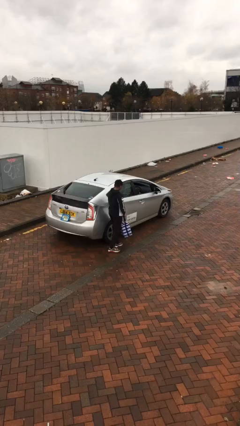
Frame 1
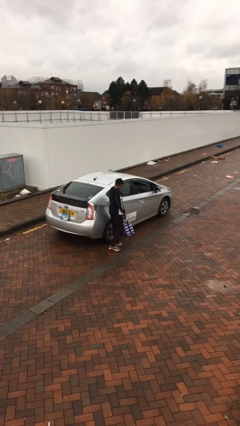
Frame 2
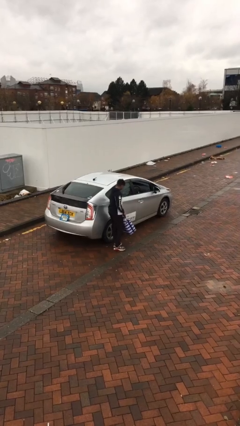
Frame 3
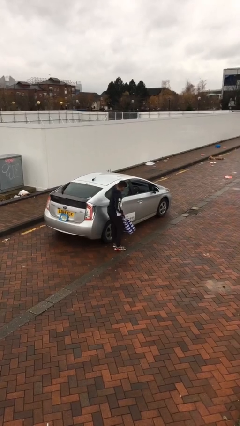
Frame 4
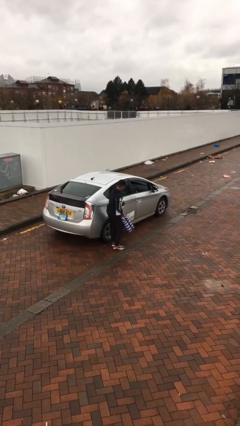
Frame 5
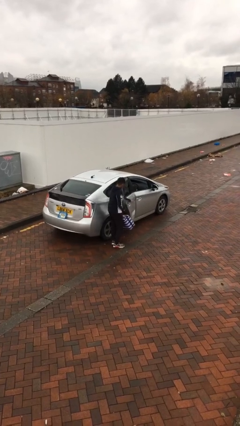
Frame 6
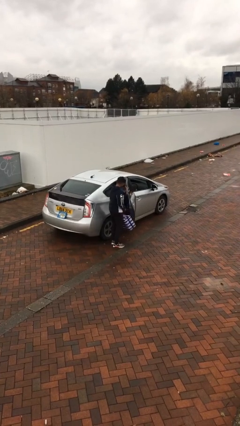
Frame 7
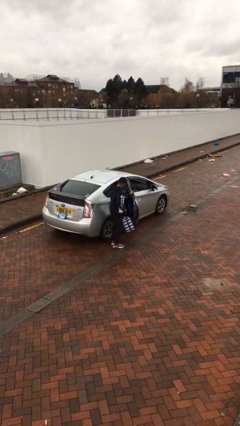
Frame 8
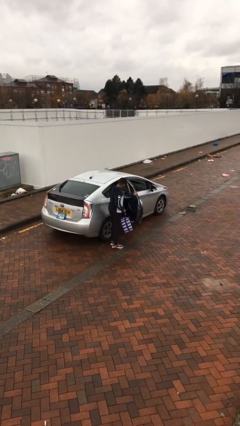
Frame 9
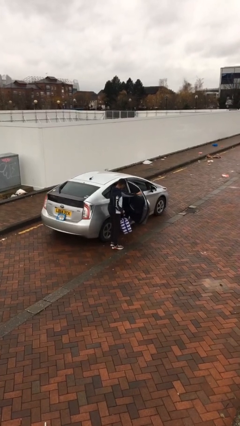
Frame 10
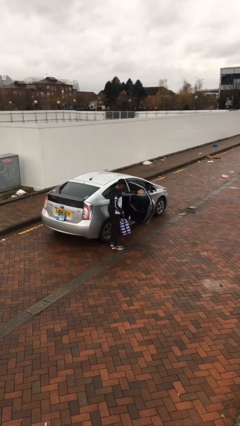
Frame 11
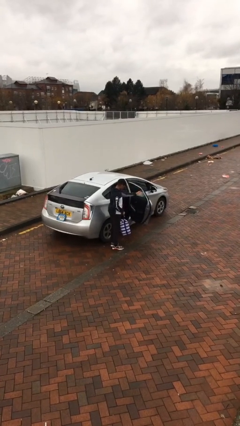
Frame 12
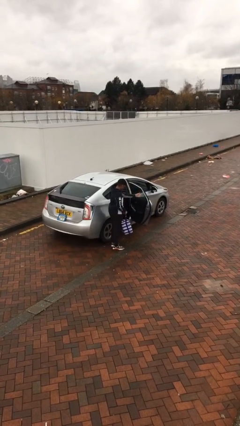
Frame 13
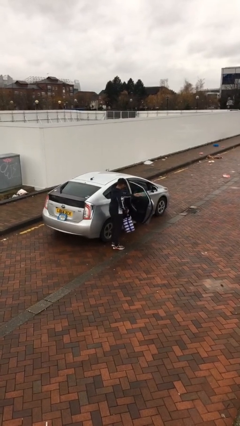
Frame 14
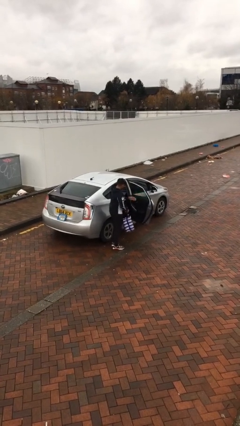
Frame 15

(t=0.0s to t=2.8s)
person opens car door

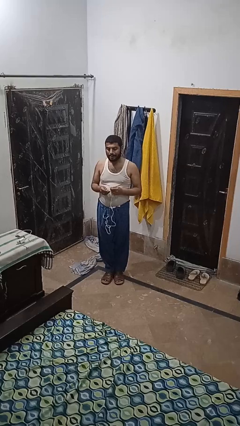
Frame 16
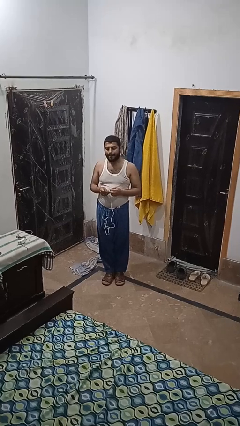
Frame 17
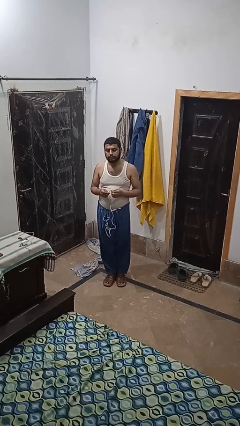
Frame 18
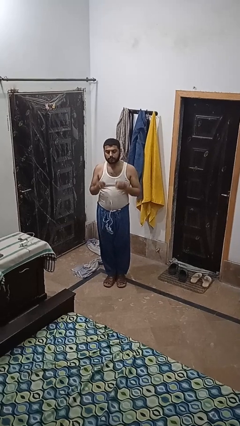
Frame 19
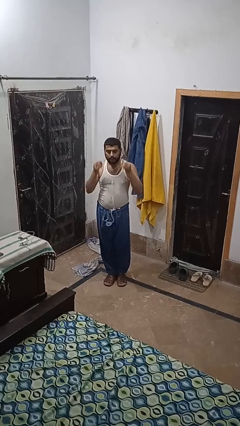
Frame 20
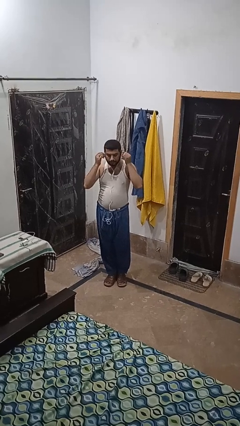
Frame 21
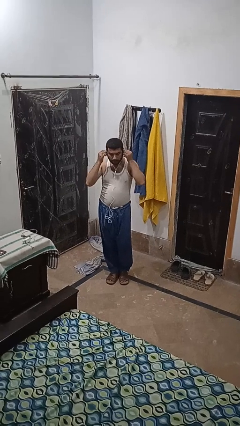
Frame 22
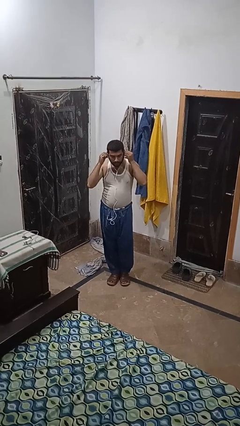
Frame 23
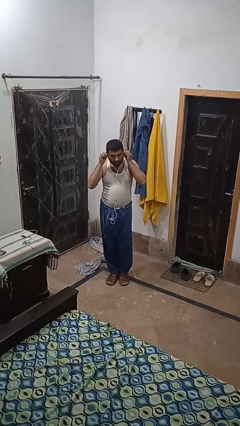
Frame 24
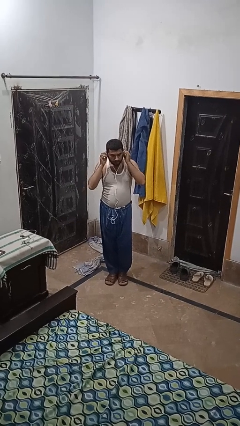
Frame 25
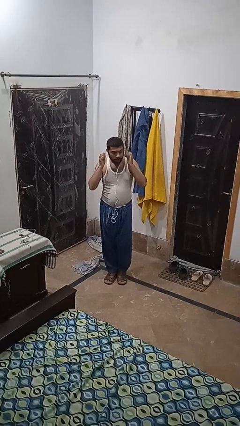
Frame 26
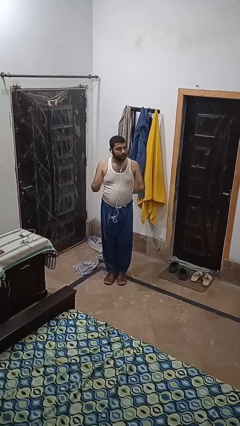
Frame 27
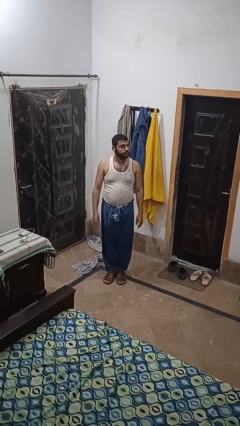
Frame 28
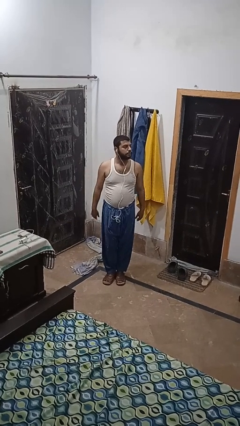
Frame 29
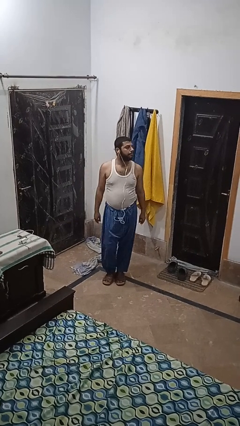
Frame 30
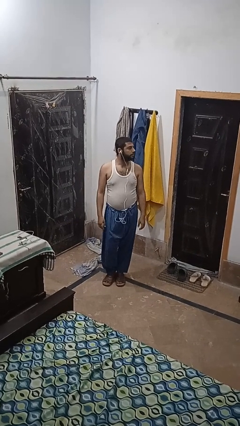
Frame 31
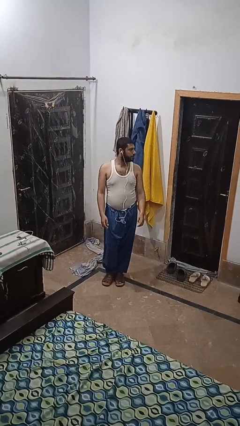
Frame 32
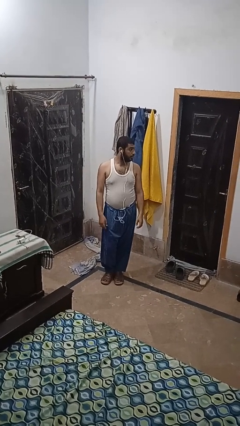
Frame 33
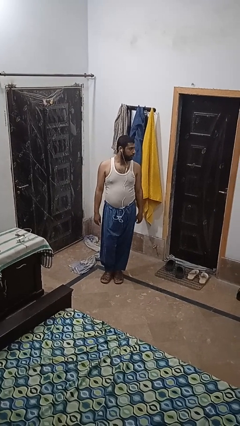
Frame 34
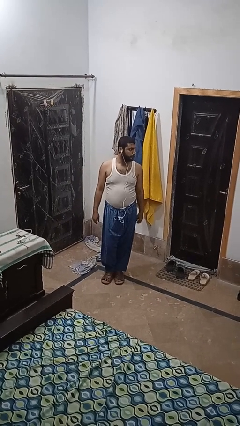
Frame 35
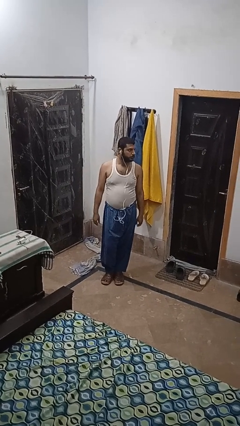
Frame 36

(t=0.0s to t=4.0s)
person puts on headphones

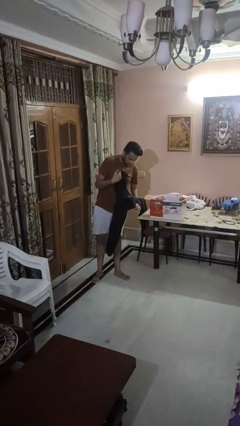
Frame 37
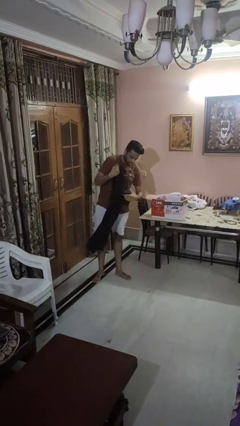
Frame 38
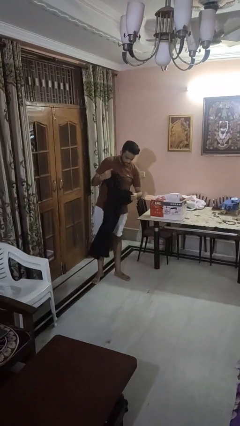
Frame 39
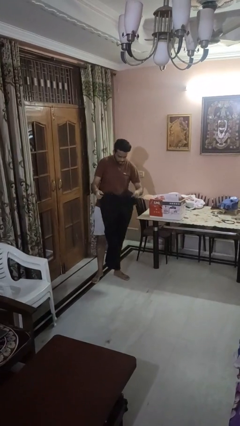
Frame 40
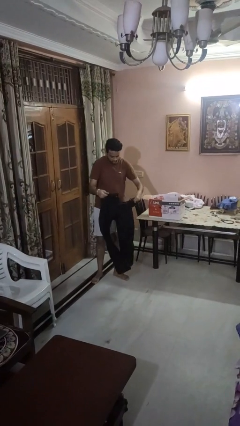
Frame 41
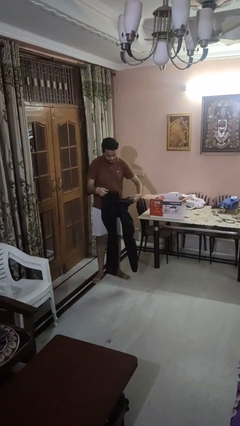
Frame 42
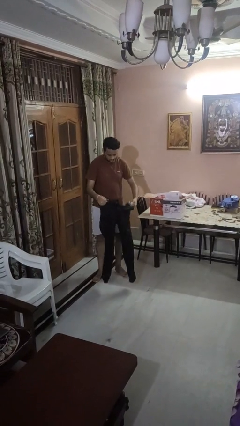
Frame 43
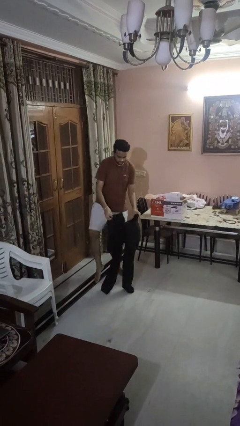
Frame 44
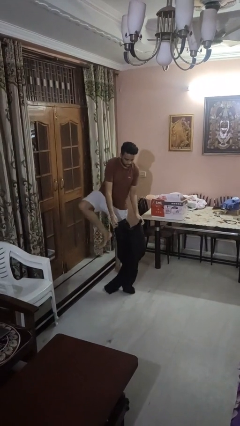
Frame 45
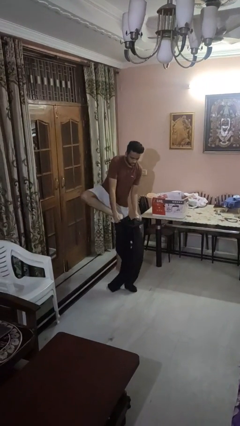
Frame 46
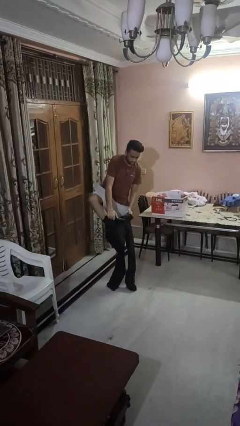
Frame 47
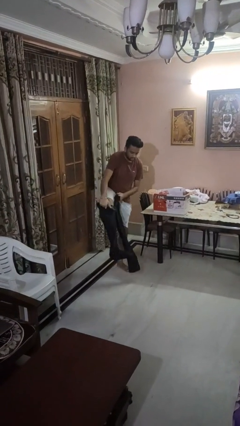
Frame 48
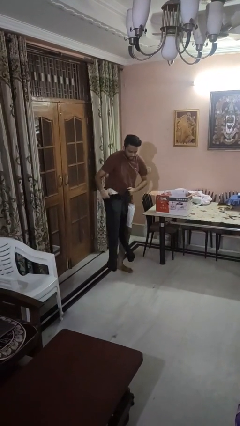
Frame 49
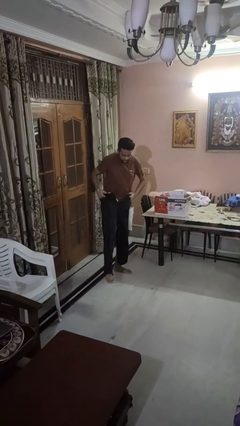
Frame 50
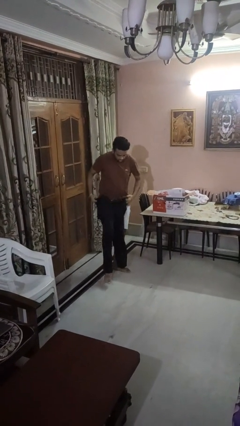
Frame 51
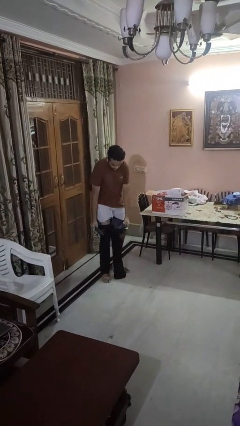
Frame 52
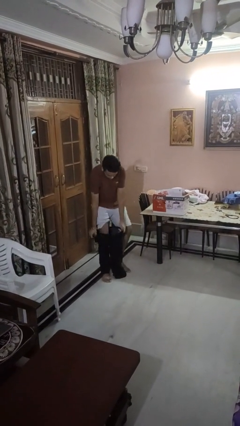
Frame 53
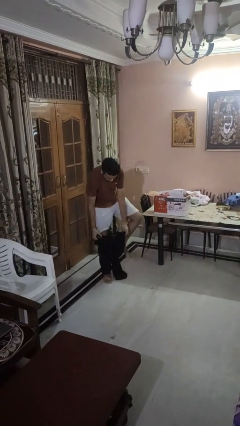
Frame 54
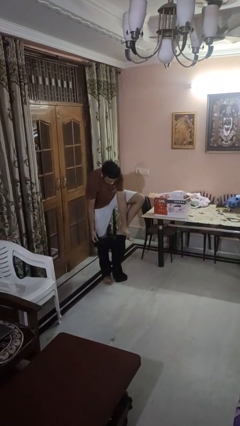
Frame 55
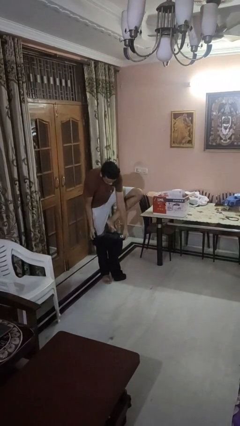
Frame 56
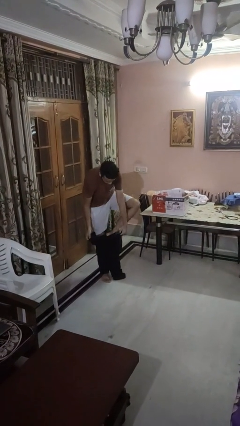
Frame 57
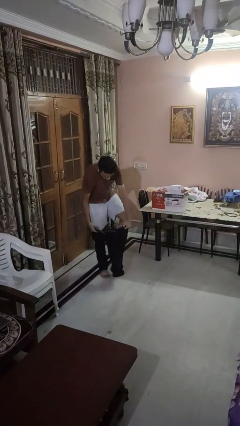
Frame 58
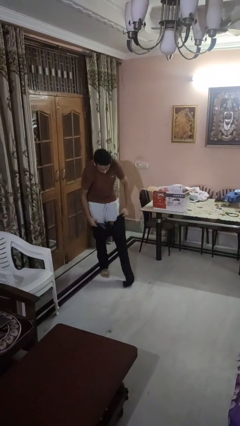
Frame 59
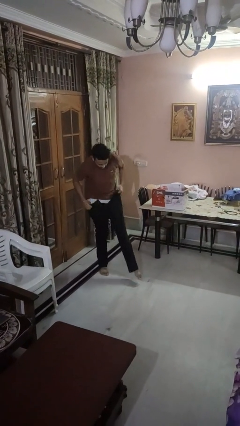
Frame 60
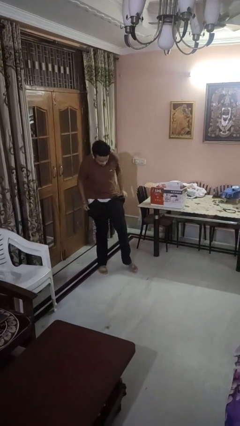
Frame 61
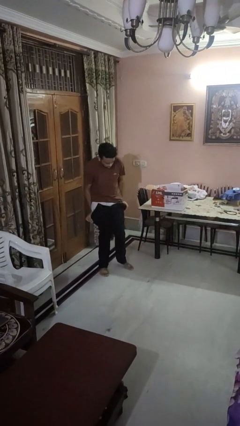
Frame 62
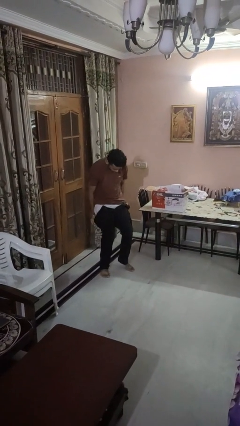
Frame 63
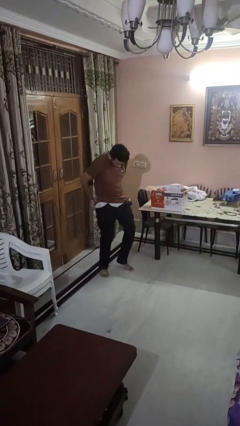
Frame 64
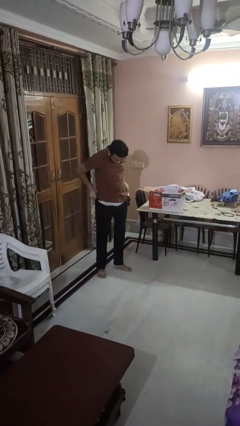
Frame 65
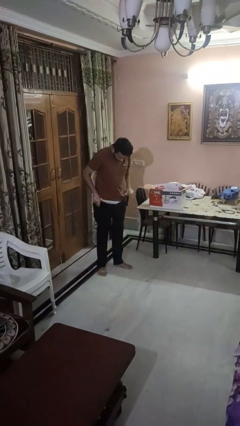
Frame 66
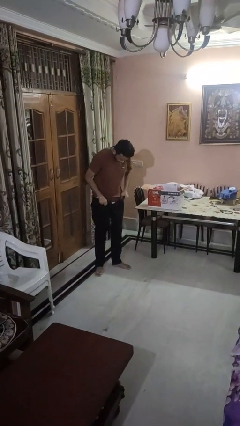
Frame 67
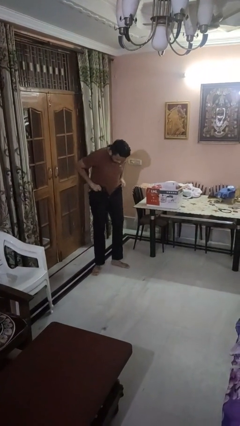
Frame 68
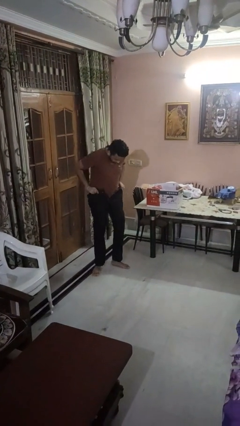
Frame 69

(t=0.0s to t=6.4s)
person puts on pants

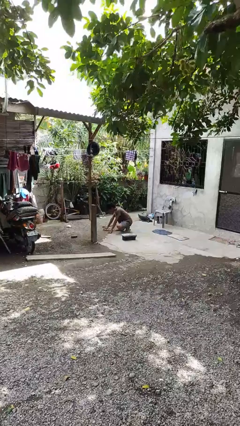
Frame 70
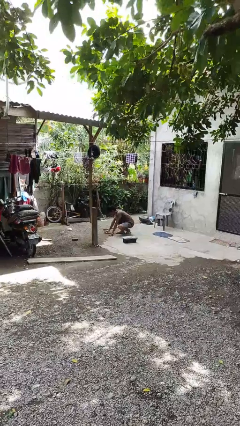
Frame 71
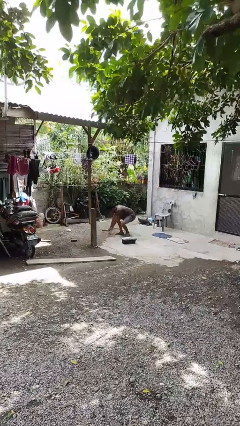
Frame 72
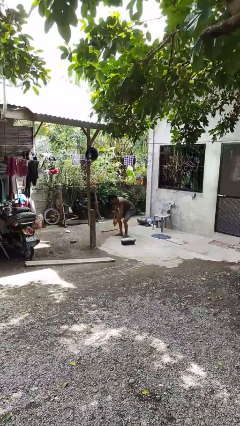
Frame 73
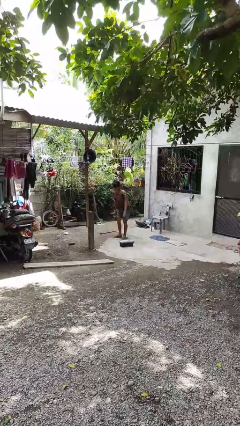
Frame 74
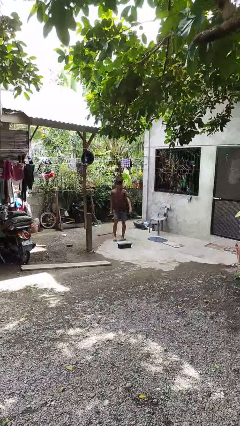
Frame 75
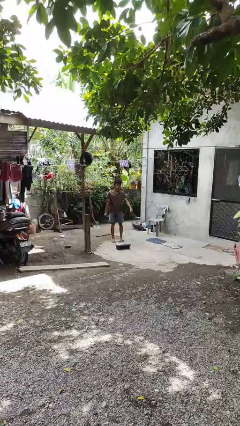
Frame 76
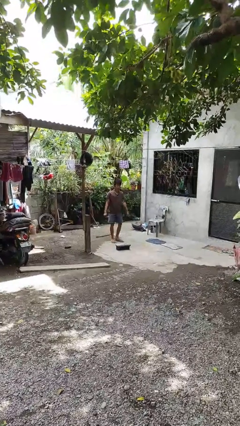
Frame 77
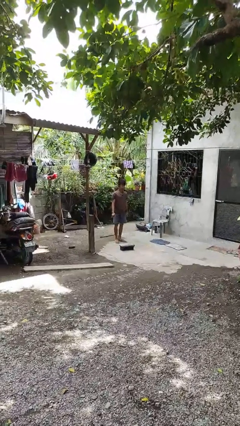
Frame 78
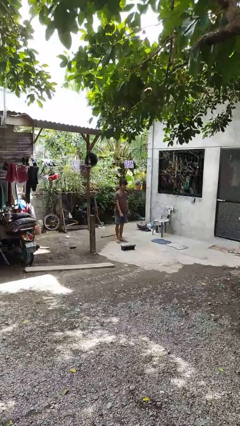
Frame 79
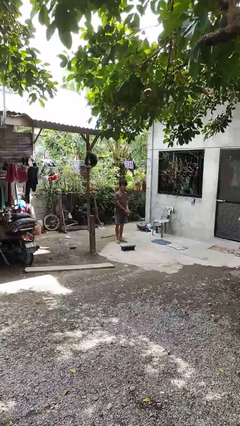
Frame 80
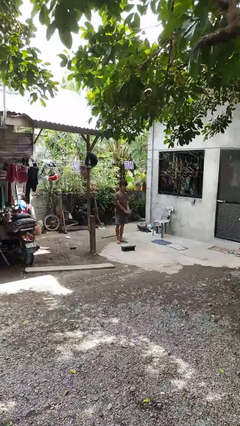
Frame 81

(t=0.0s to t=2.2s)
person stands up from floor

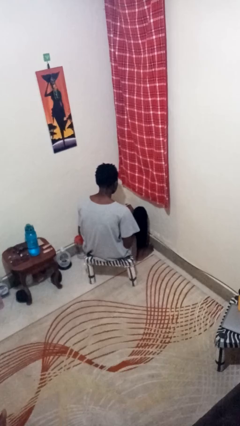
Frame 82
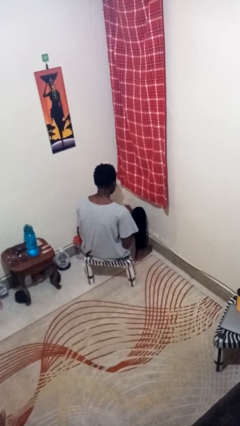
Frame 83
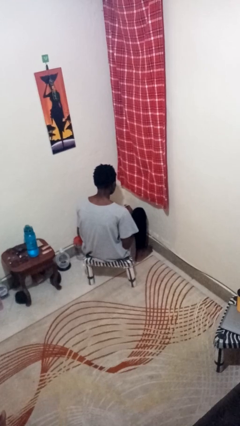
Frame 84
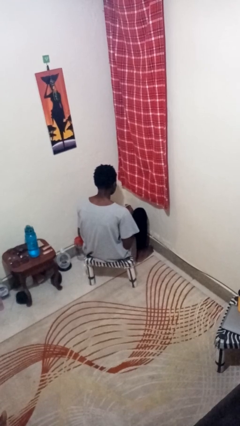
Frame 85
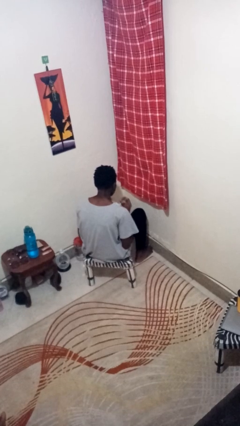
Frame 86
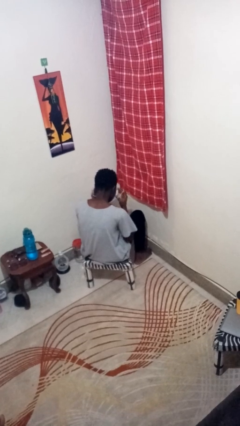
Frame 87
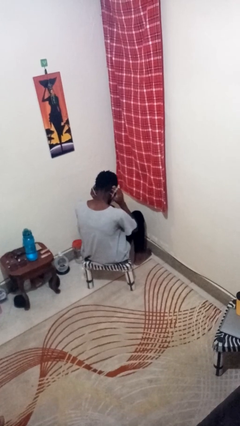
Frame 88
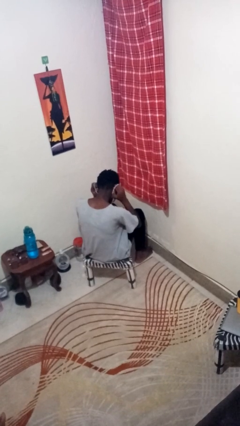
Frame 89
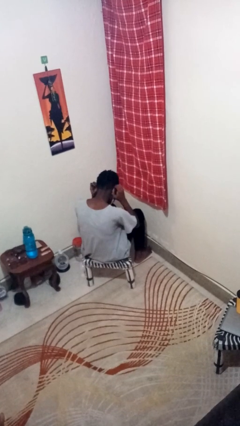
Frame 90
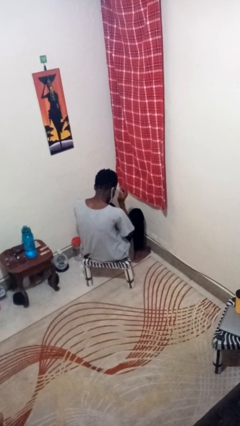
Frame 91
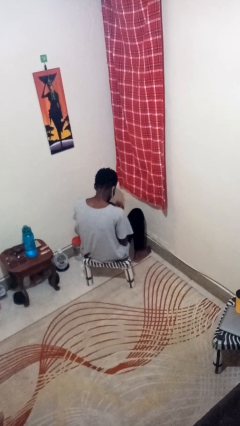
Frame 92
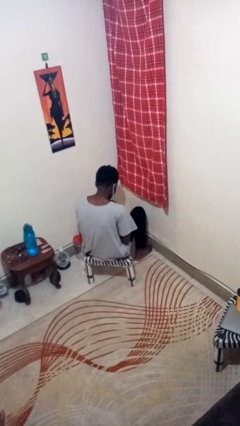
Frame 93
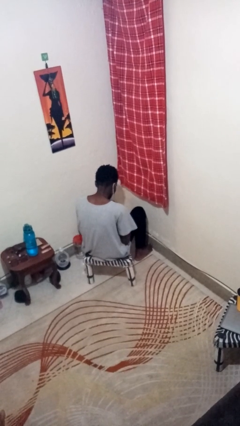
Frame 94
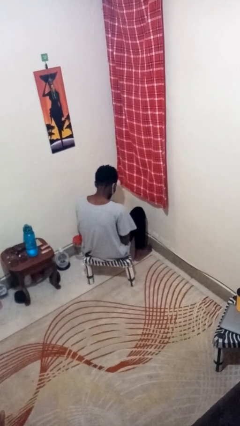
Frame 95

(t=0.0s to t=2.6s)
person puts on facemask
